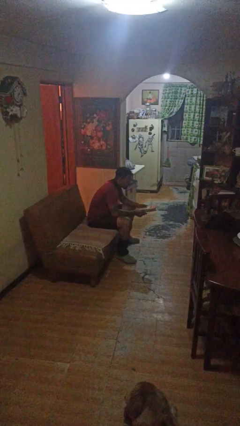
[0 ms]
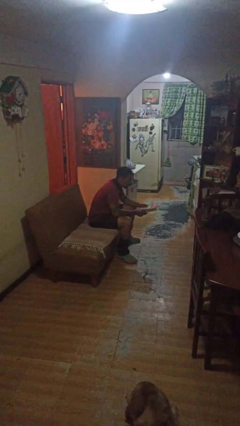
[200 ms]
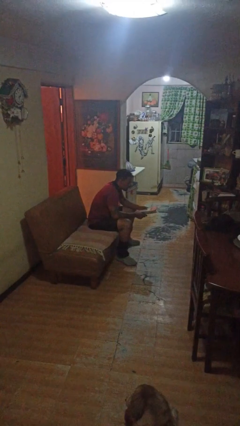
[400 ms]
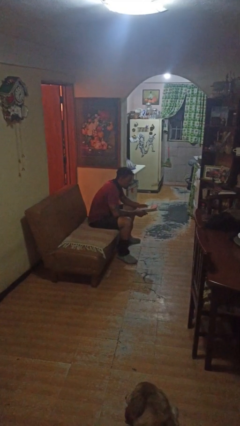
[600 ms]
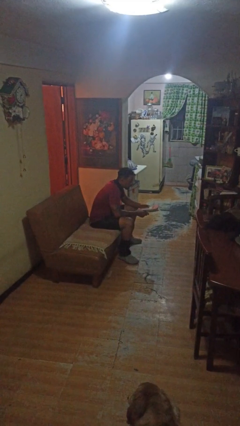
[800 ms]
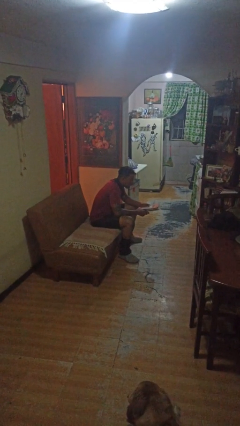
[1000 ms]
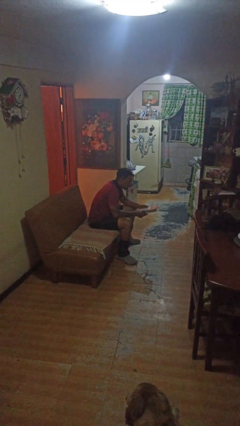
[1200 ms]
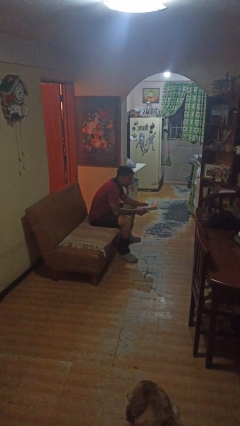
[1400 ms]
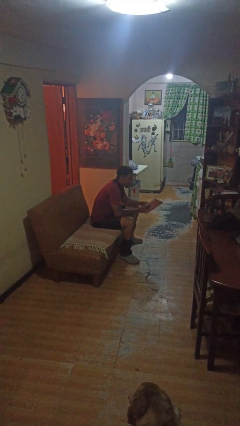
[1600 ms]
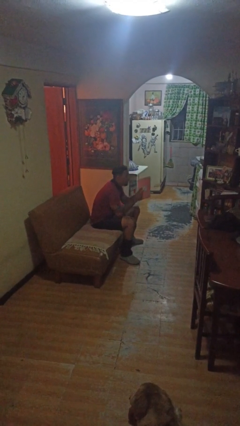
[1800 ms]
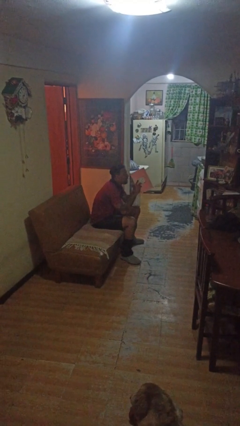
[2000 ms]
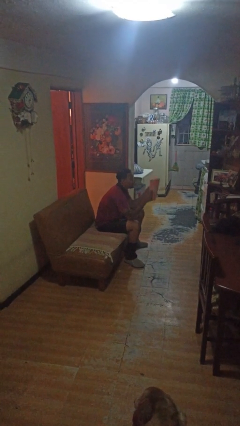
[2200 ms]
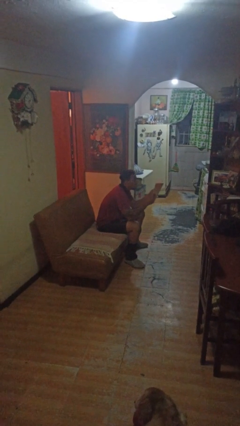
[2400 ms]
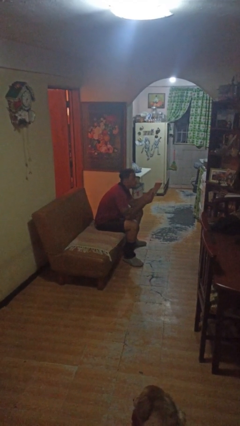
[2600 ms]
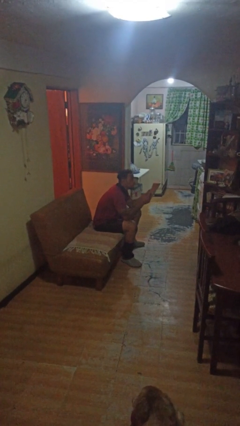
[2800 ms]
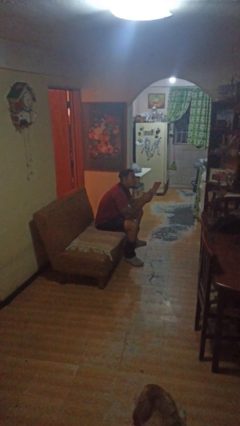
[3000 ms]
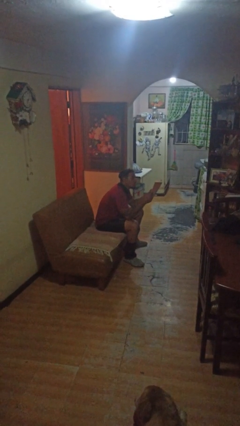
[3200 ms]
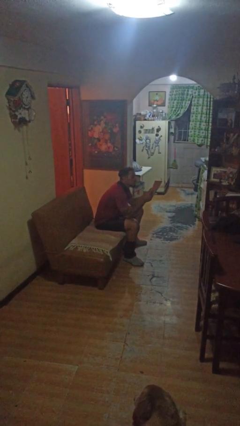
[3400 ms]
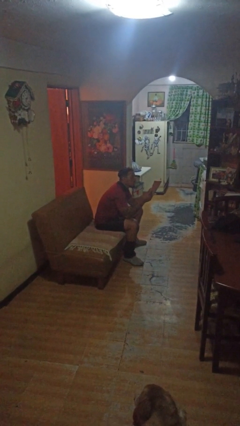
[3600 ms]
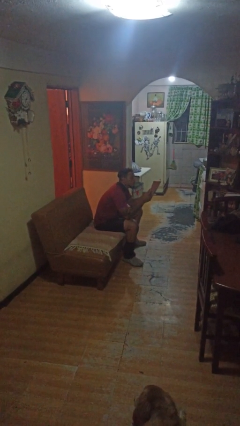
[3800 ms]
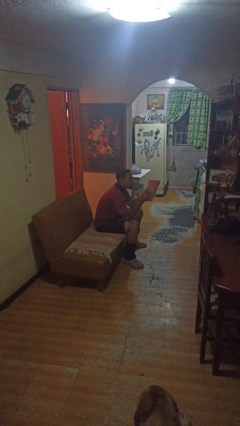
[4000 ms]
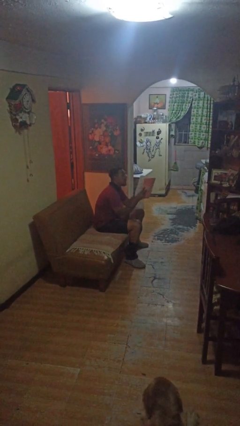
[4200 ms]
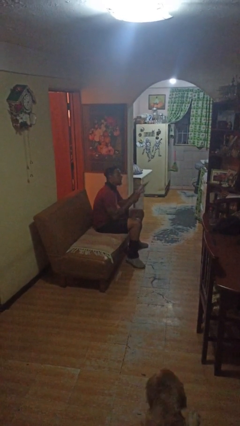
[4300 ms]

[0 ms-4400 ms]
person reads document

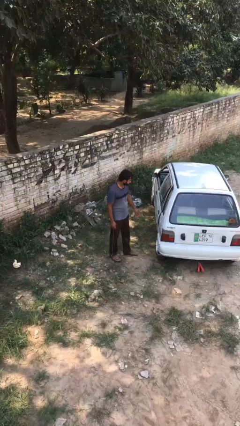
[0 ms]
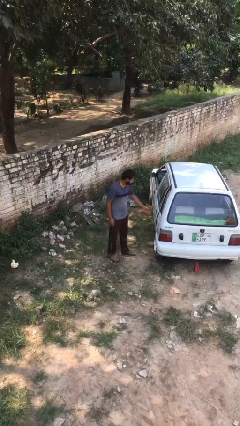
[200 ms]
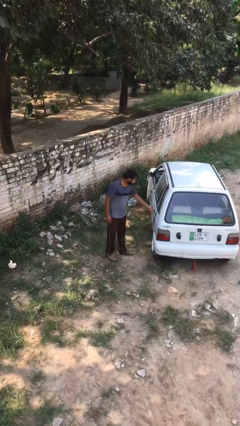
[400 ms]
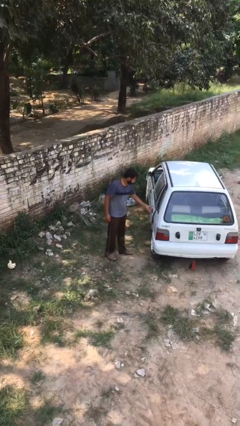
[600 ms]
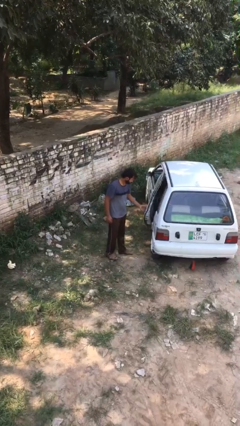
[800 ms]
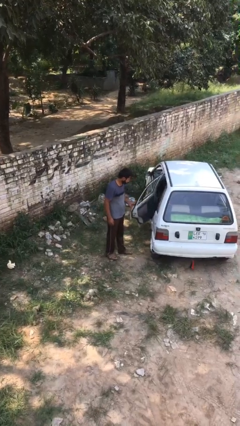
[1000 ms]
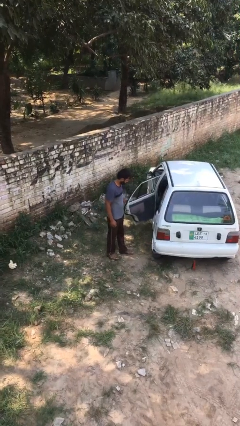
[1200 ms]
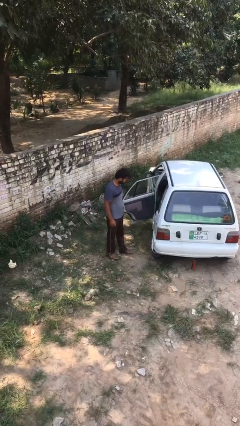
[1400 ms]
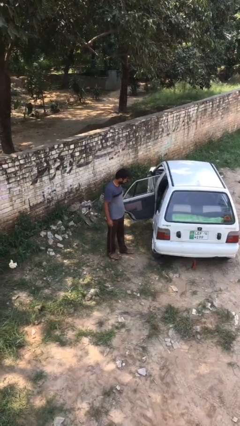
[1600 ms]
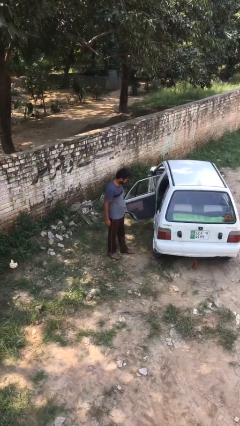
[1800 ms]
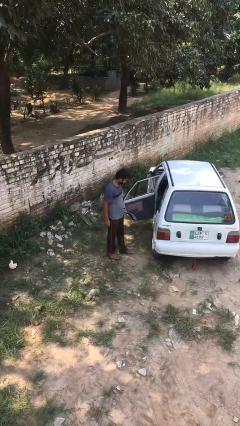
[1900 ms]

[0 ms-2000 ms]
person opens car door

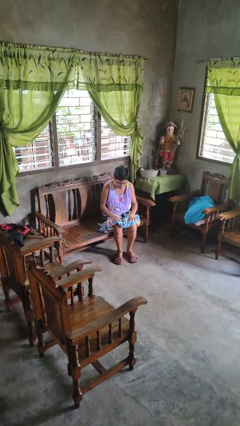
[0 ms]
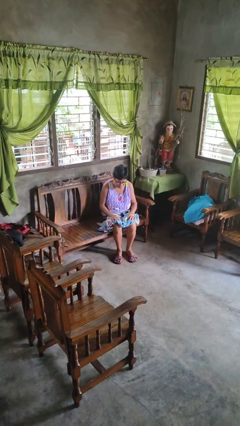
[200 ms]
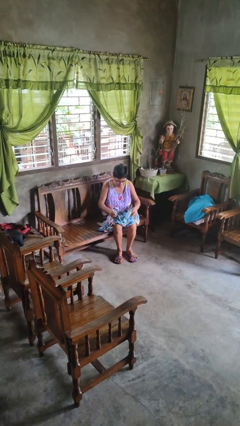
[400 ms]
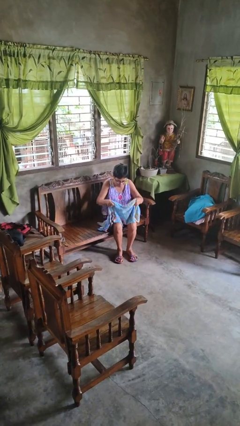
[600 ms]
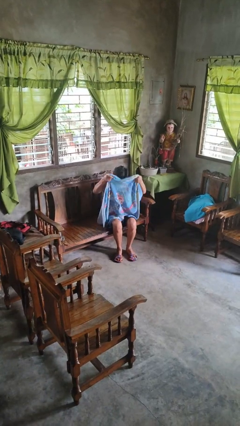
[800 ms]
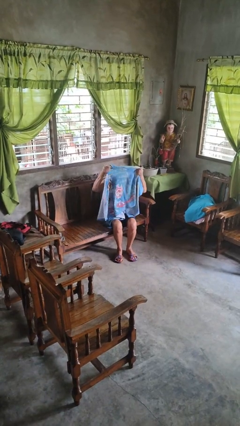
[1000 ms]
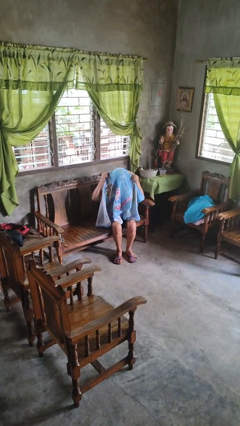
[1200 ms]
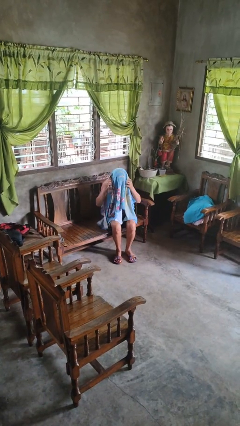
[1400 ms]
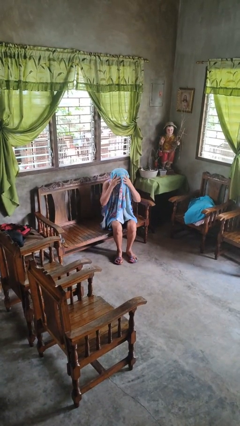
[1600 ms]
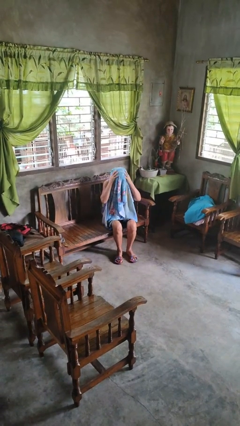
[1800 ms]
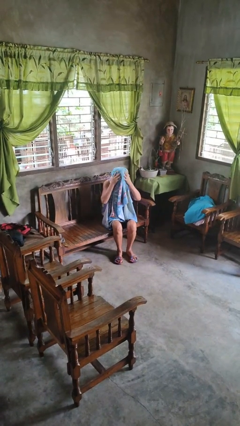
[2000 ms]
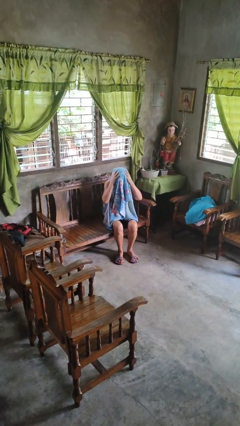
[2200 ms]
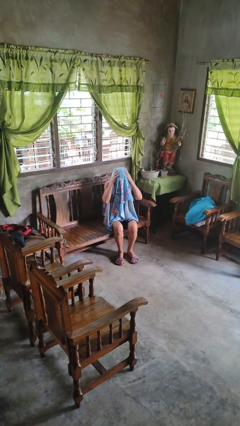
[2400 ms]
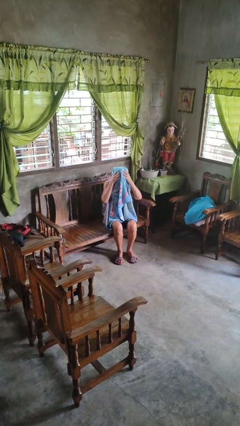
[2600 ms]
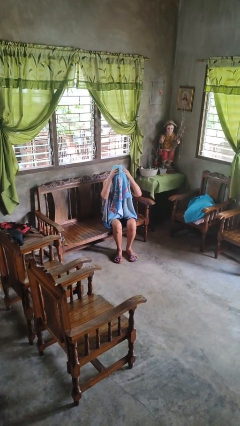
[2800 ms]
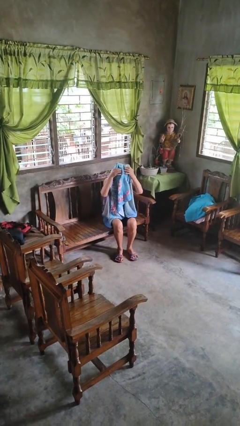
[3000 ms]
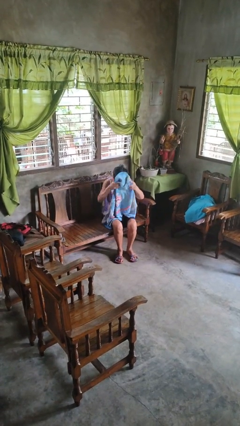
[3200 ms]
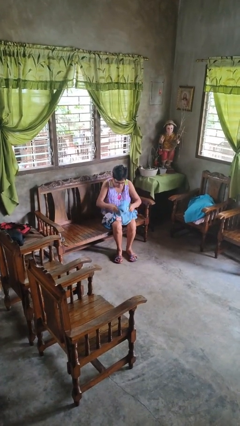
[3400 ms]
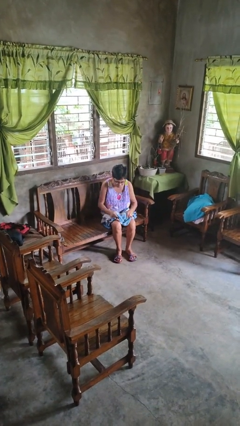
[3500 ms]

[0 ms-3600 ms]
person dries hair with towel

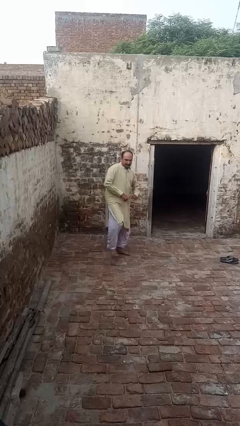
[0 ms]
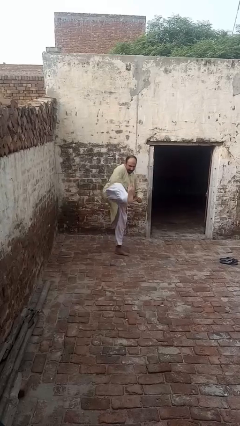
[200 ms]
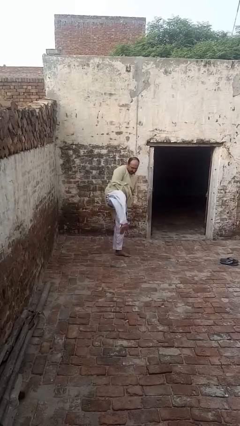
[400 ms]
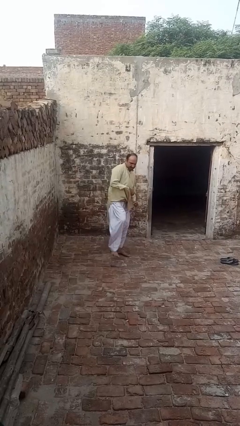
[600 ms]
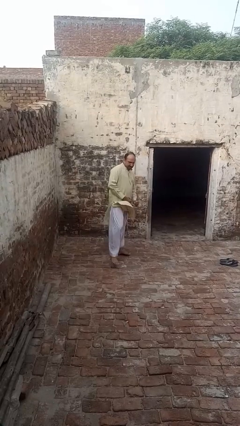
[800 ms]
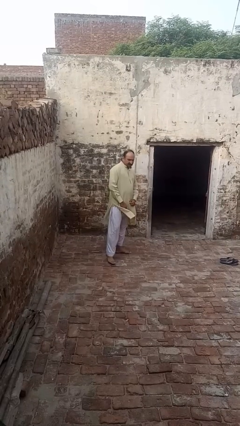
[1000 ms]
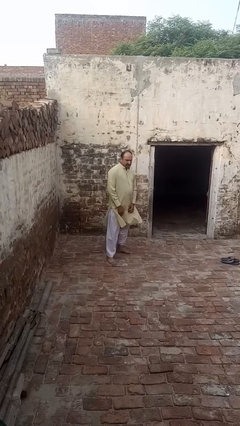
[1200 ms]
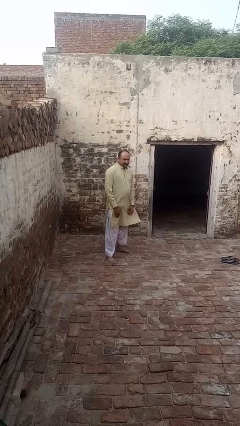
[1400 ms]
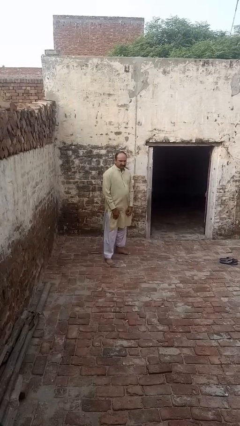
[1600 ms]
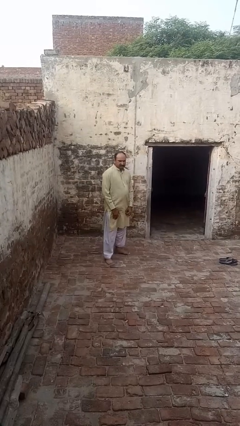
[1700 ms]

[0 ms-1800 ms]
person karate kicks

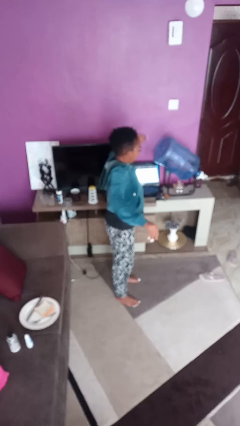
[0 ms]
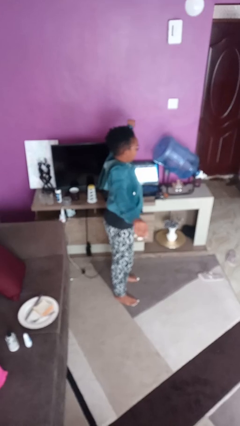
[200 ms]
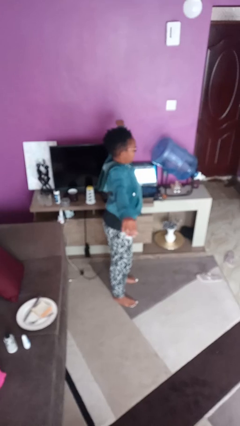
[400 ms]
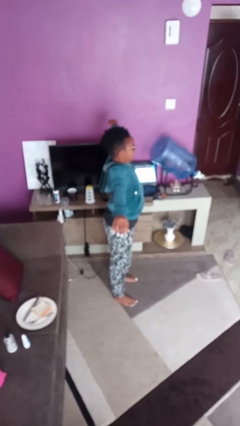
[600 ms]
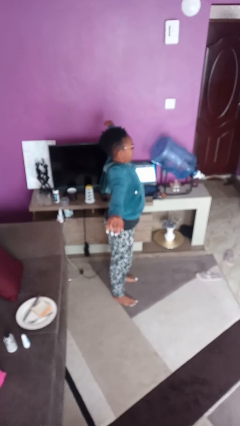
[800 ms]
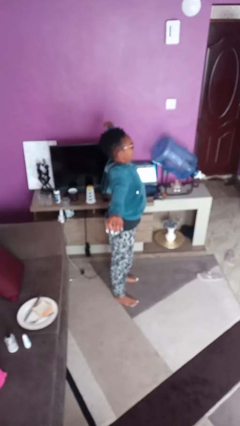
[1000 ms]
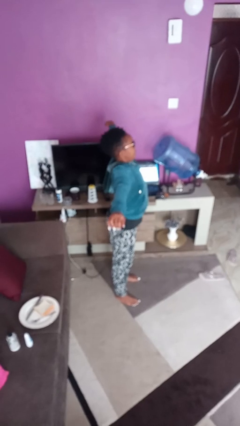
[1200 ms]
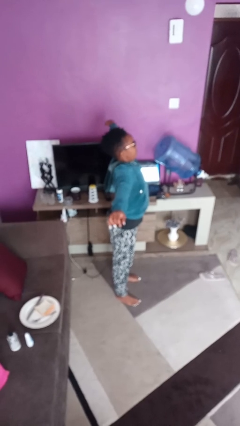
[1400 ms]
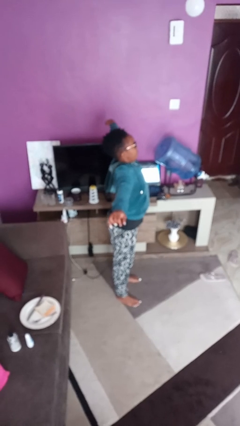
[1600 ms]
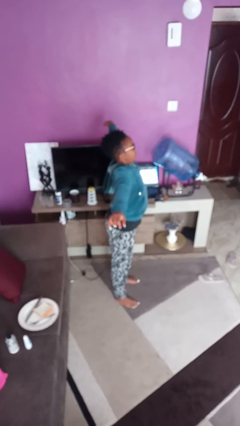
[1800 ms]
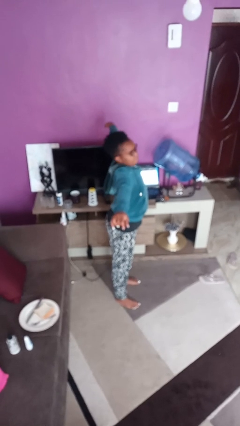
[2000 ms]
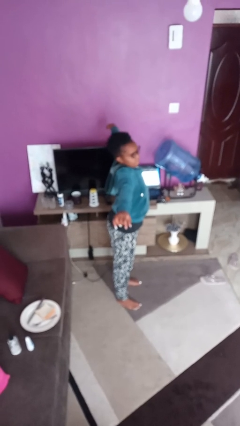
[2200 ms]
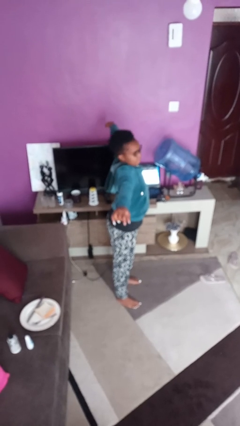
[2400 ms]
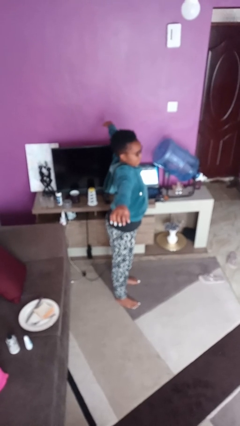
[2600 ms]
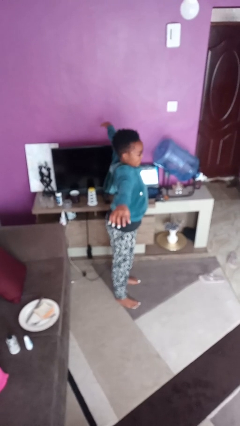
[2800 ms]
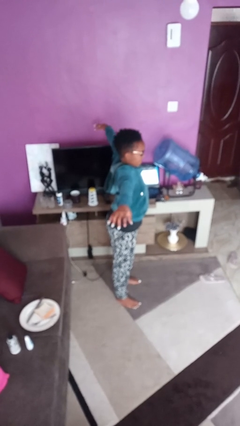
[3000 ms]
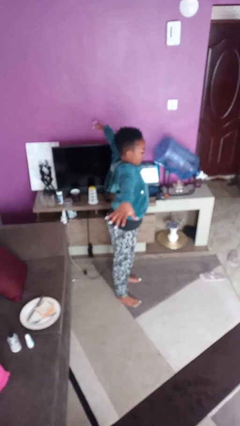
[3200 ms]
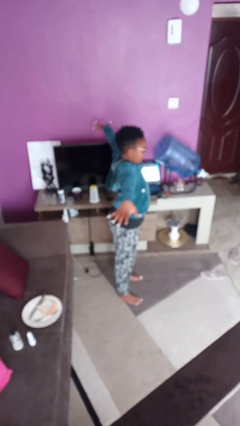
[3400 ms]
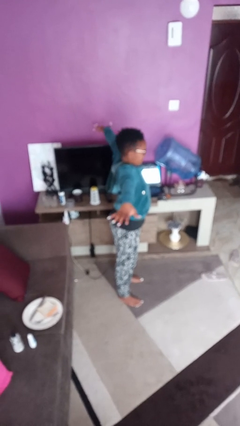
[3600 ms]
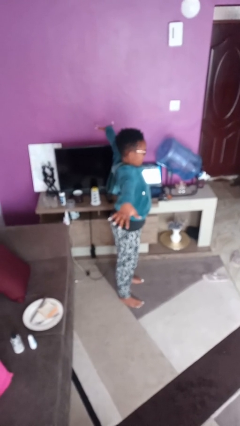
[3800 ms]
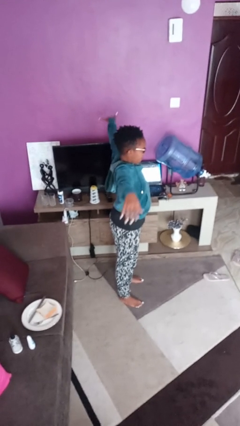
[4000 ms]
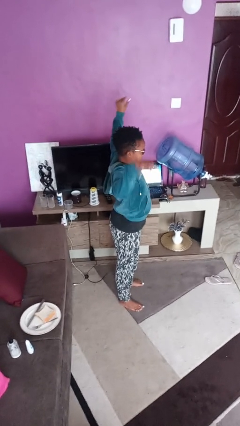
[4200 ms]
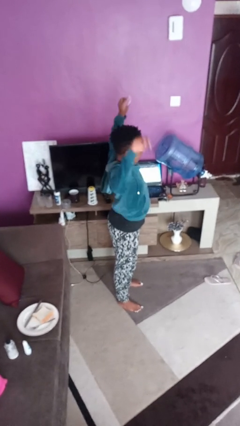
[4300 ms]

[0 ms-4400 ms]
person stretches arms to side

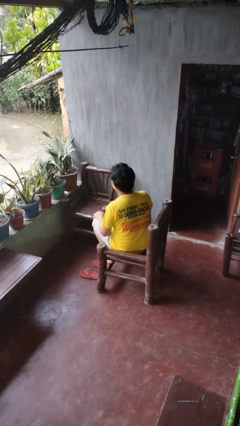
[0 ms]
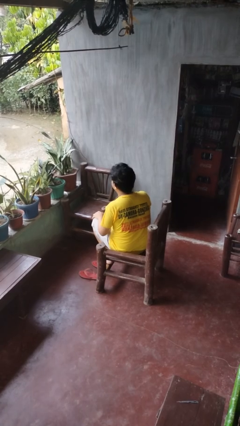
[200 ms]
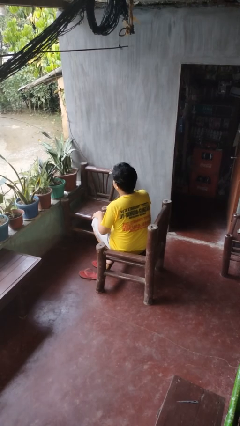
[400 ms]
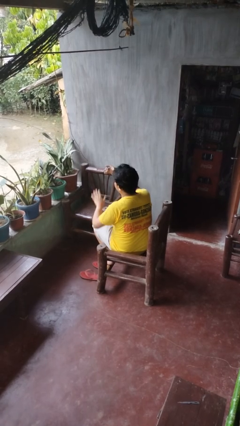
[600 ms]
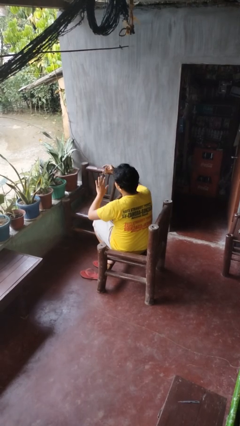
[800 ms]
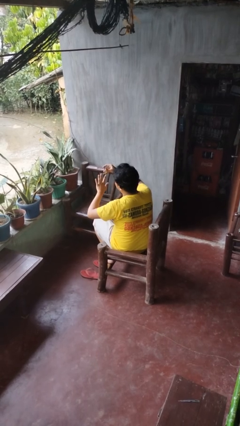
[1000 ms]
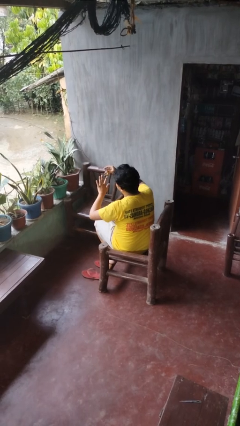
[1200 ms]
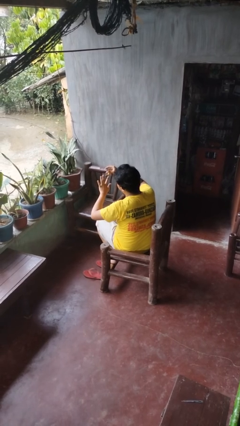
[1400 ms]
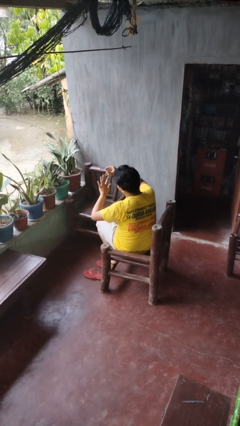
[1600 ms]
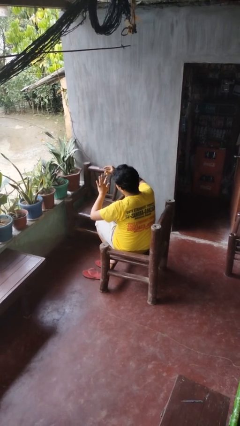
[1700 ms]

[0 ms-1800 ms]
person clips fingernails
